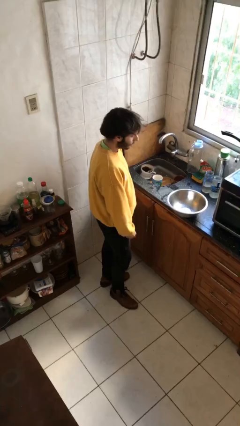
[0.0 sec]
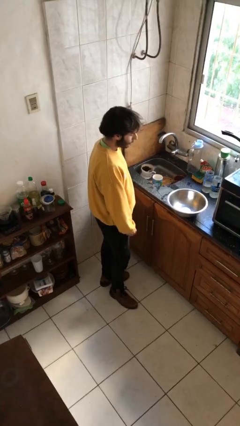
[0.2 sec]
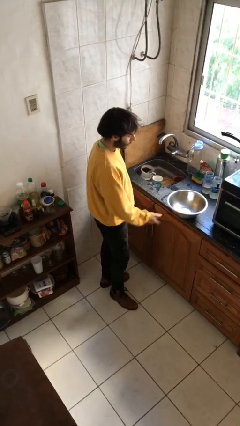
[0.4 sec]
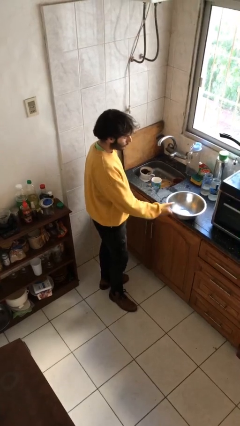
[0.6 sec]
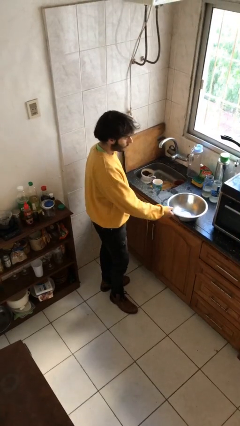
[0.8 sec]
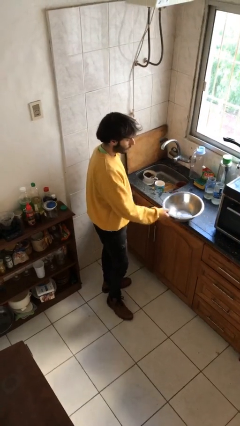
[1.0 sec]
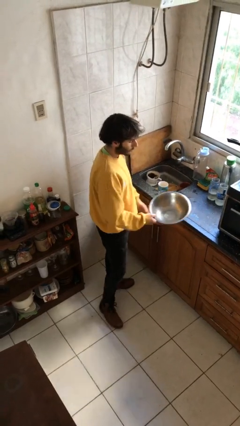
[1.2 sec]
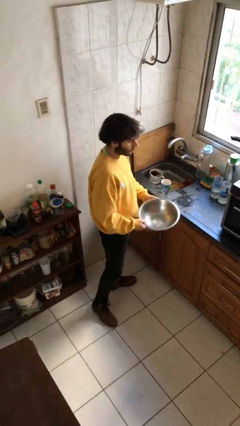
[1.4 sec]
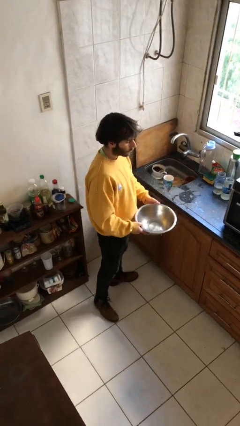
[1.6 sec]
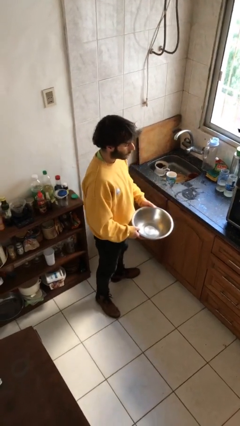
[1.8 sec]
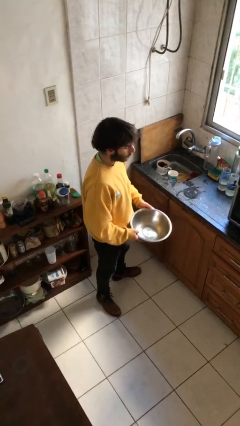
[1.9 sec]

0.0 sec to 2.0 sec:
person picks up object from countertop

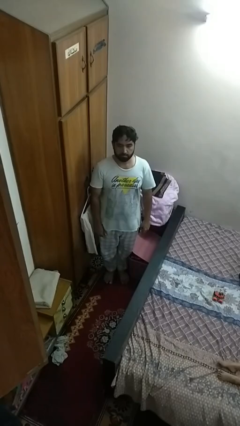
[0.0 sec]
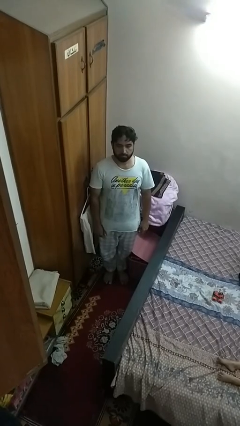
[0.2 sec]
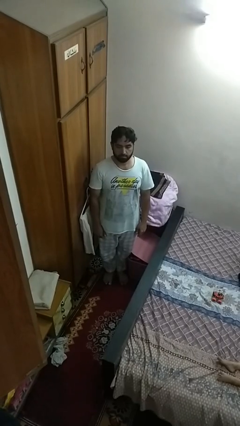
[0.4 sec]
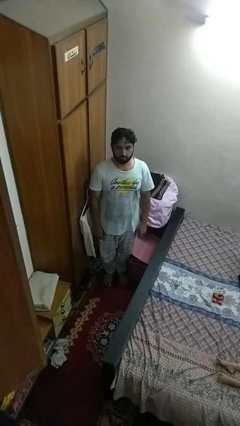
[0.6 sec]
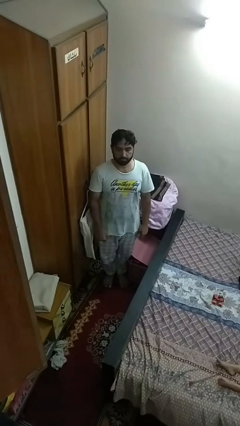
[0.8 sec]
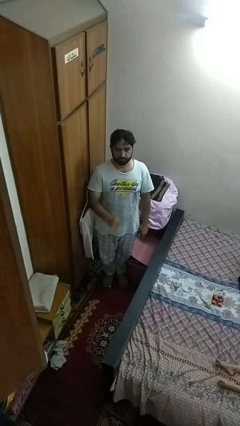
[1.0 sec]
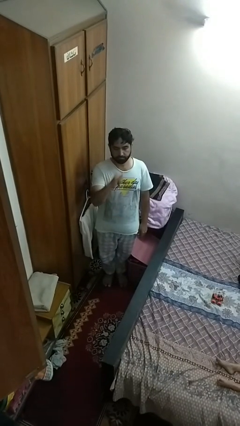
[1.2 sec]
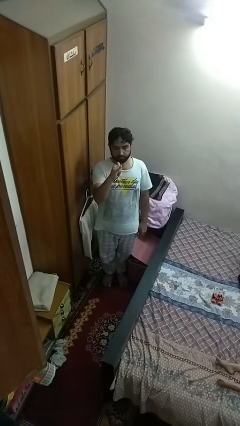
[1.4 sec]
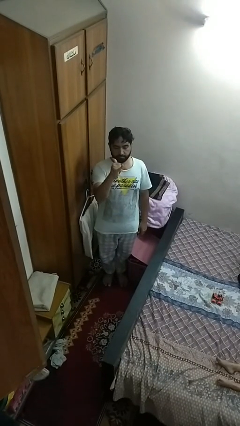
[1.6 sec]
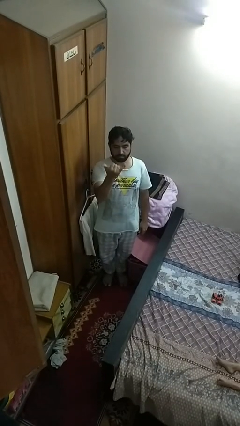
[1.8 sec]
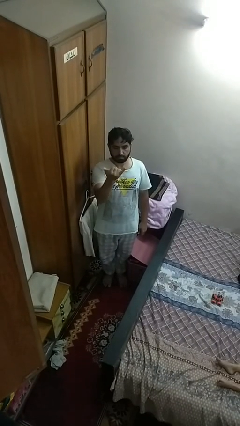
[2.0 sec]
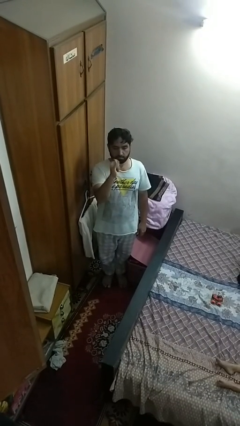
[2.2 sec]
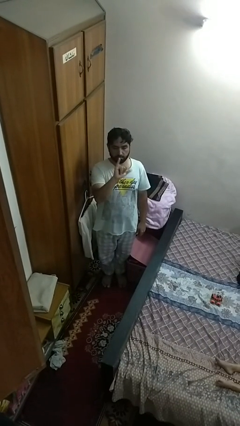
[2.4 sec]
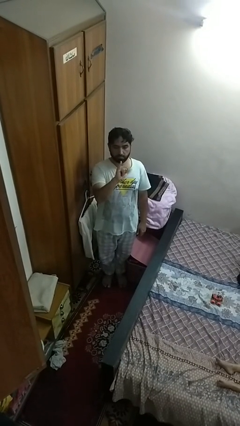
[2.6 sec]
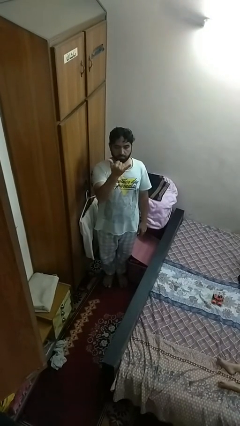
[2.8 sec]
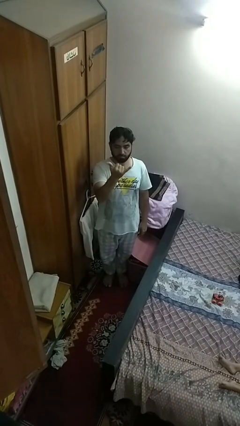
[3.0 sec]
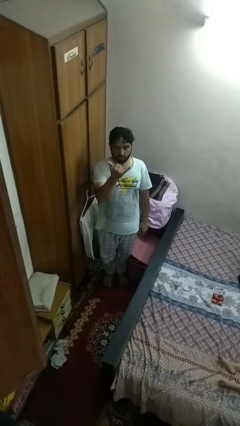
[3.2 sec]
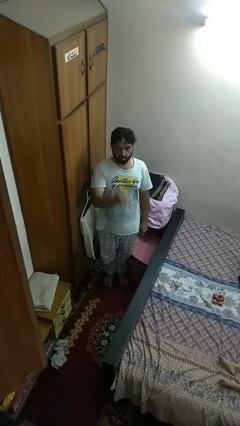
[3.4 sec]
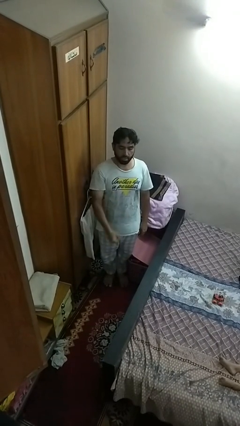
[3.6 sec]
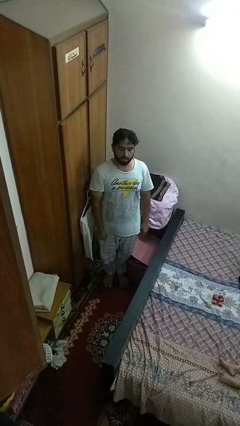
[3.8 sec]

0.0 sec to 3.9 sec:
person gestures hang loose

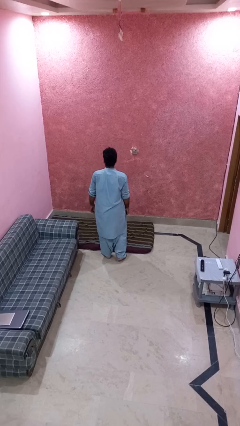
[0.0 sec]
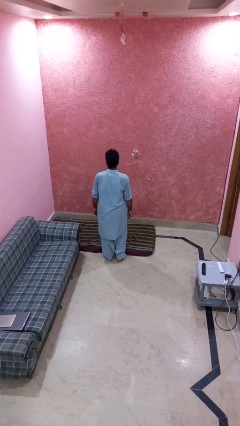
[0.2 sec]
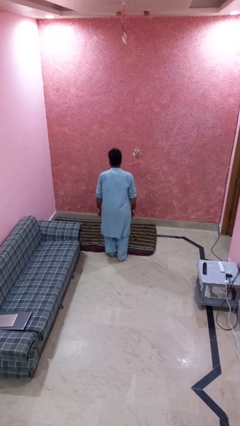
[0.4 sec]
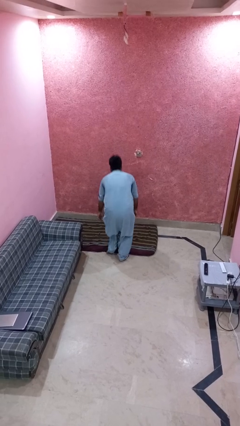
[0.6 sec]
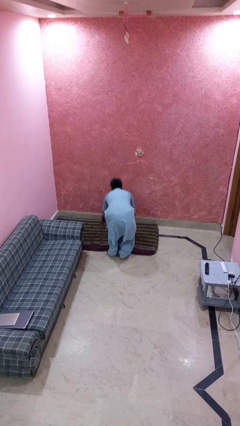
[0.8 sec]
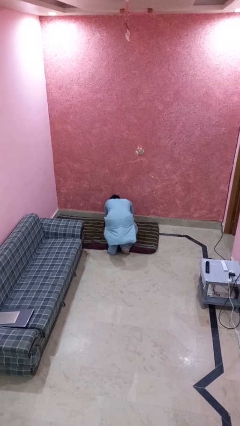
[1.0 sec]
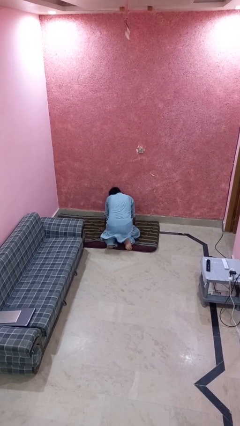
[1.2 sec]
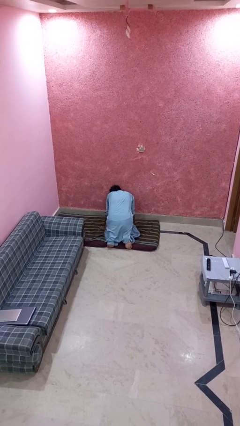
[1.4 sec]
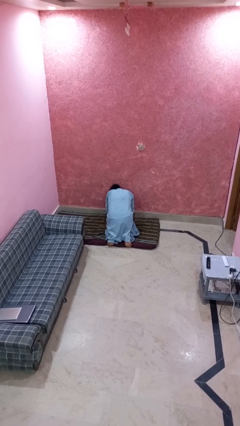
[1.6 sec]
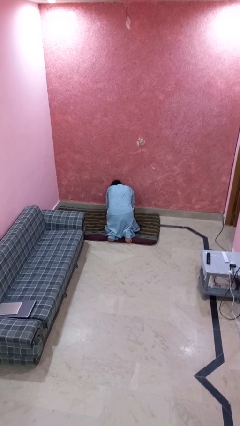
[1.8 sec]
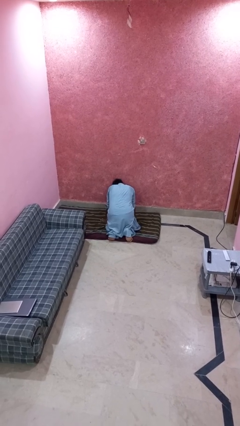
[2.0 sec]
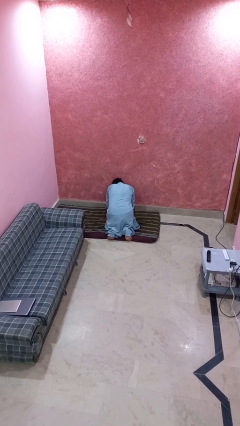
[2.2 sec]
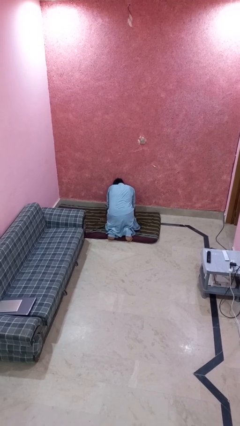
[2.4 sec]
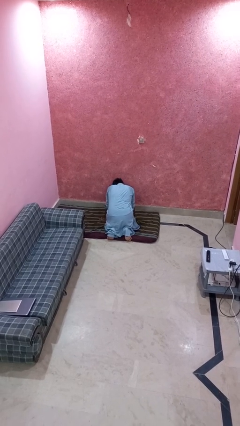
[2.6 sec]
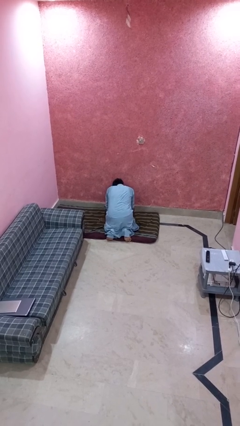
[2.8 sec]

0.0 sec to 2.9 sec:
person trips on object on floor

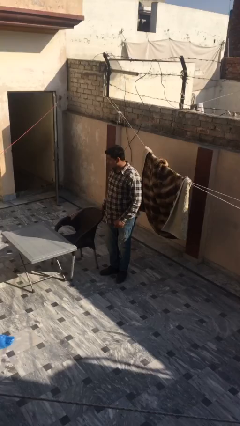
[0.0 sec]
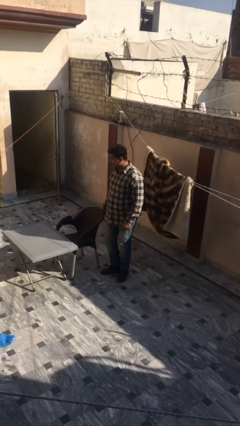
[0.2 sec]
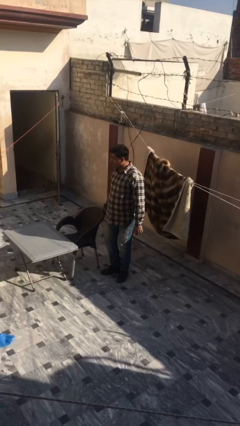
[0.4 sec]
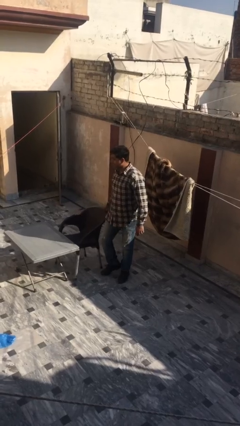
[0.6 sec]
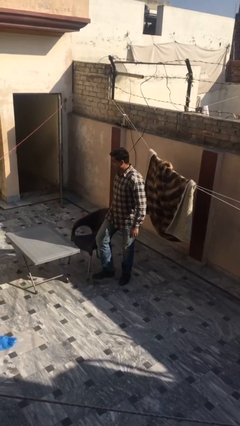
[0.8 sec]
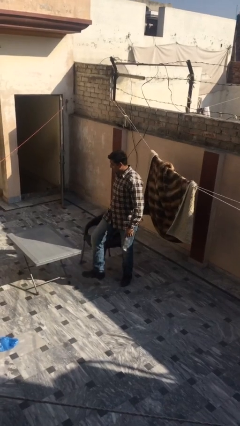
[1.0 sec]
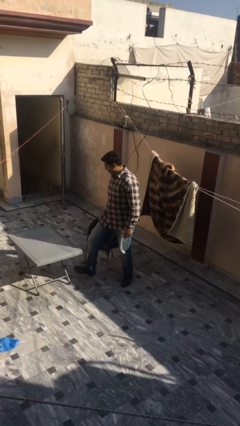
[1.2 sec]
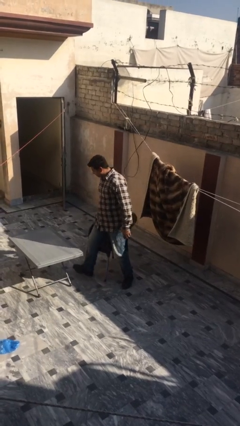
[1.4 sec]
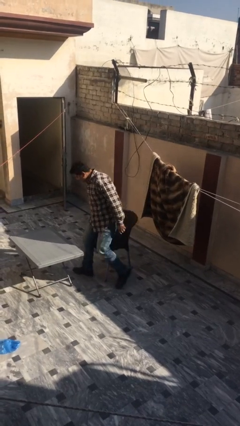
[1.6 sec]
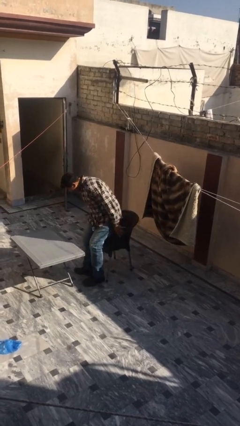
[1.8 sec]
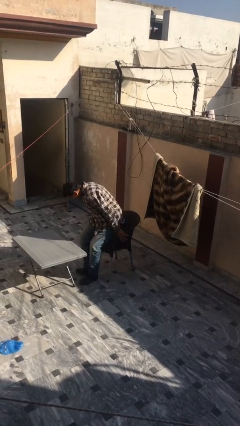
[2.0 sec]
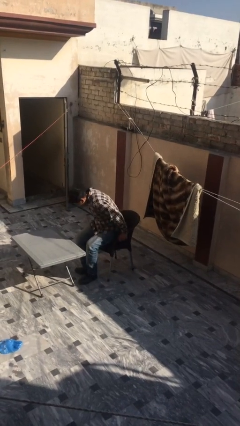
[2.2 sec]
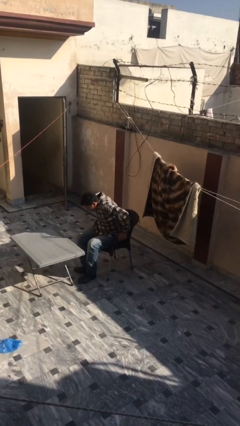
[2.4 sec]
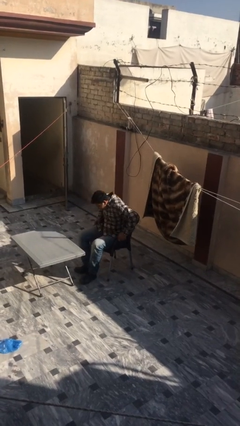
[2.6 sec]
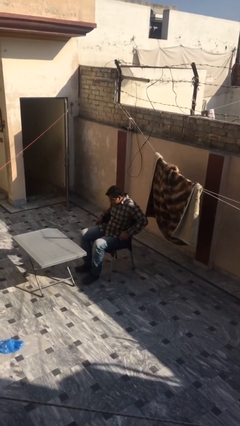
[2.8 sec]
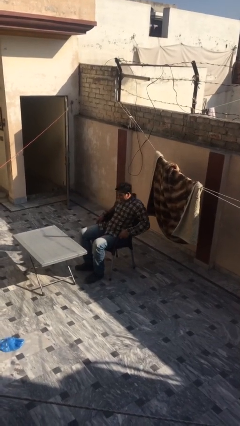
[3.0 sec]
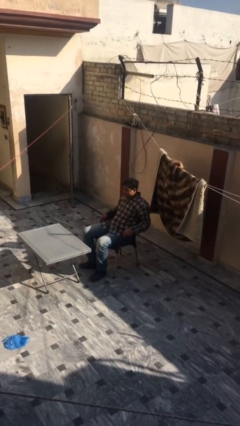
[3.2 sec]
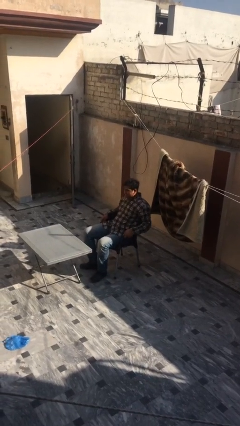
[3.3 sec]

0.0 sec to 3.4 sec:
person sits down

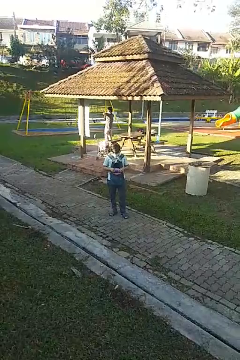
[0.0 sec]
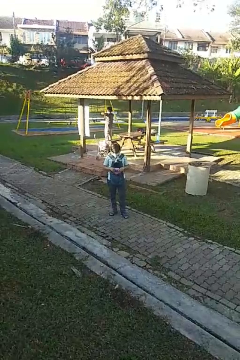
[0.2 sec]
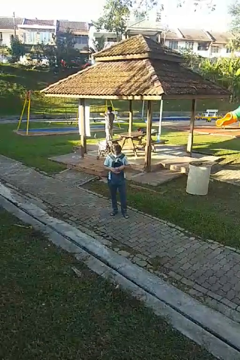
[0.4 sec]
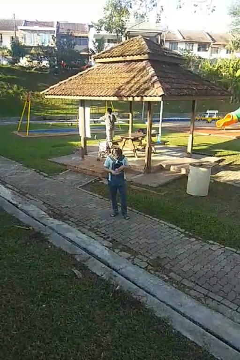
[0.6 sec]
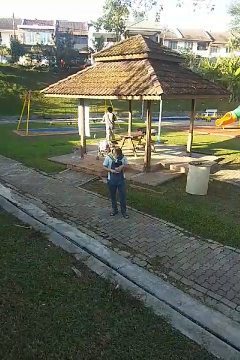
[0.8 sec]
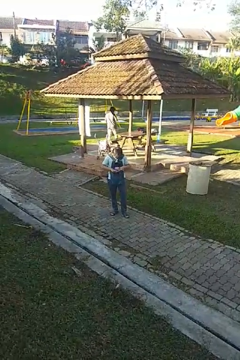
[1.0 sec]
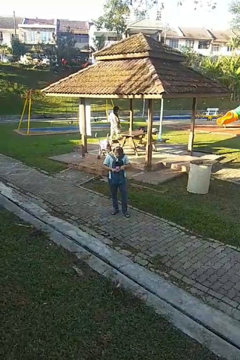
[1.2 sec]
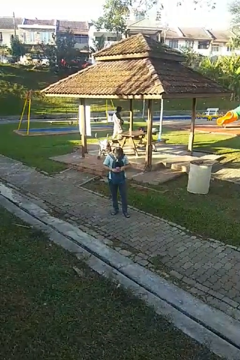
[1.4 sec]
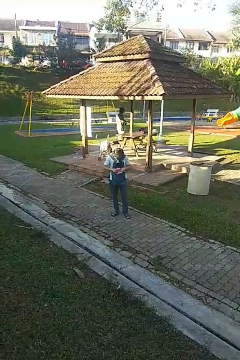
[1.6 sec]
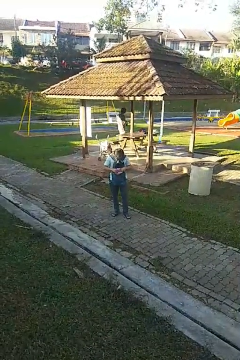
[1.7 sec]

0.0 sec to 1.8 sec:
person searches in backpack

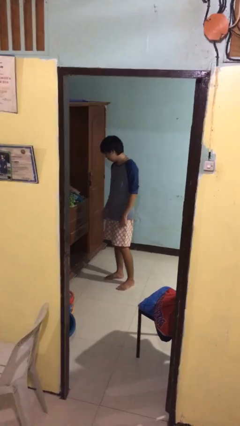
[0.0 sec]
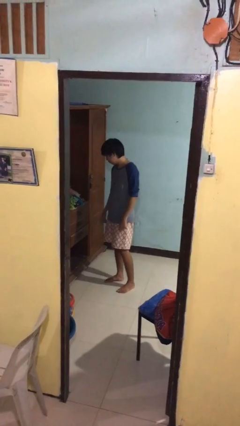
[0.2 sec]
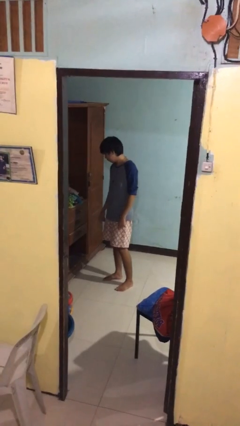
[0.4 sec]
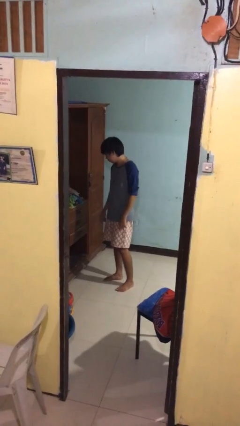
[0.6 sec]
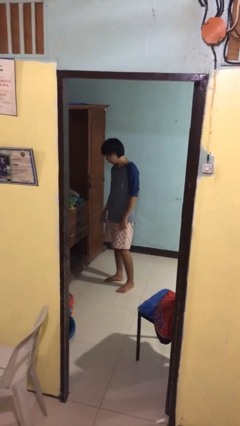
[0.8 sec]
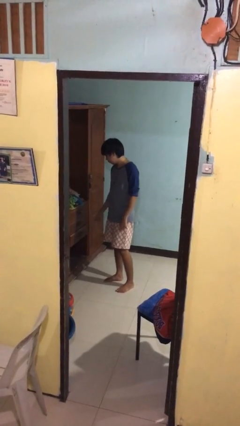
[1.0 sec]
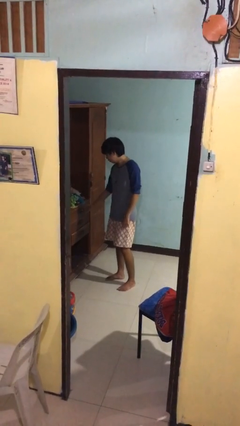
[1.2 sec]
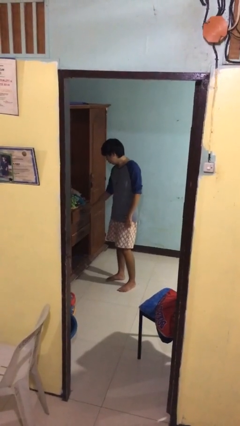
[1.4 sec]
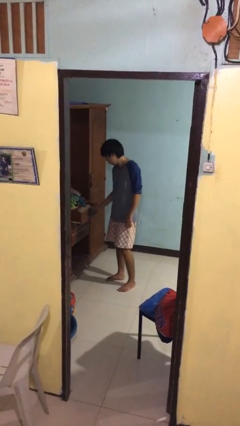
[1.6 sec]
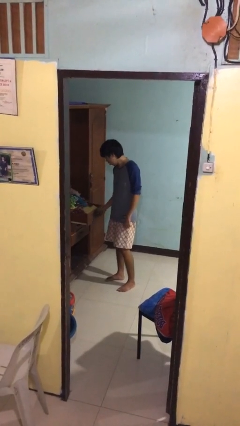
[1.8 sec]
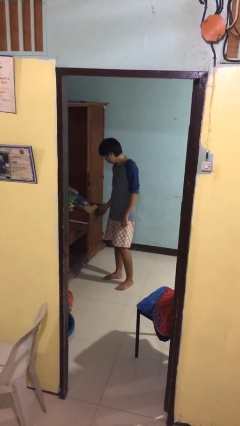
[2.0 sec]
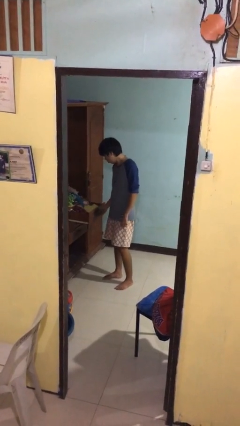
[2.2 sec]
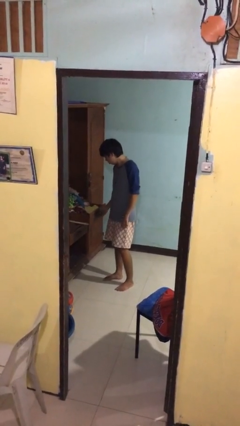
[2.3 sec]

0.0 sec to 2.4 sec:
person opens dresser drawer

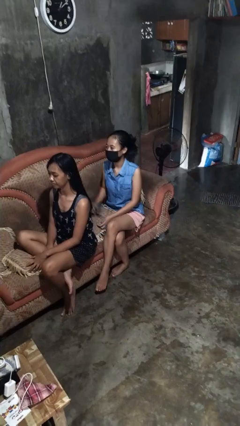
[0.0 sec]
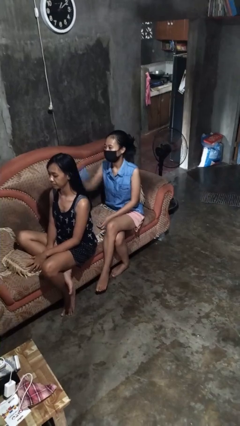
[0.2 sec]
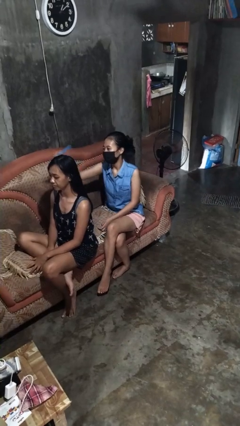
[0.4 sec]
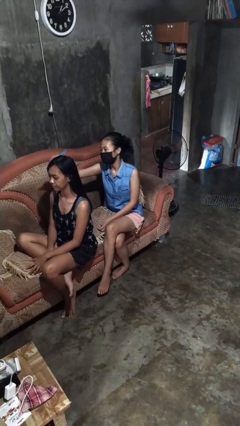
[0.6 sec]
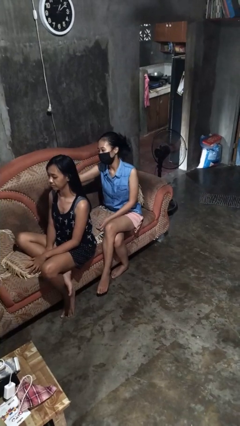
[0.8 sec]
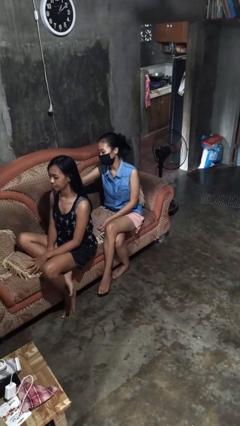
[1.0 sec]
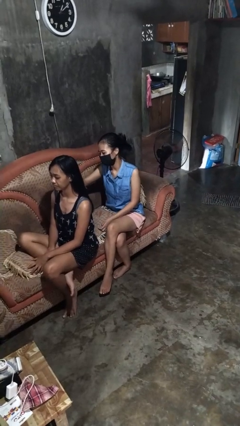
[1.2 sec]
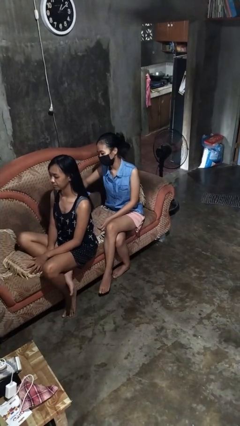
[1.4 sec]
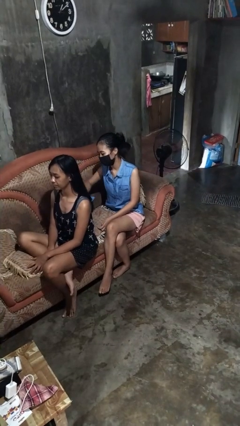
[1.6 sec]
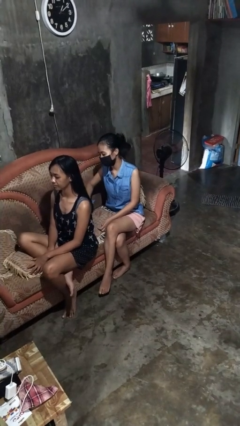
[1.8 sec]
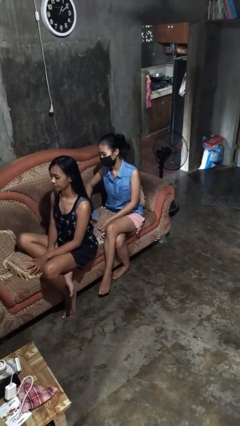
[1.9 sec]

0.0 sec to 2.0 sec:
person brushes hair of person
